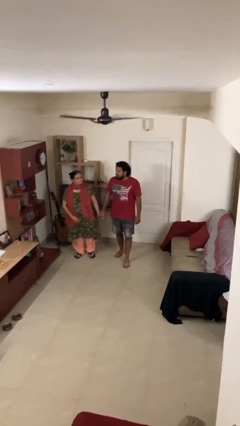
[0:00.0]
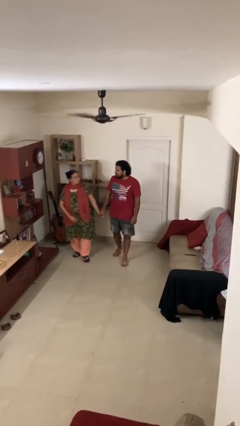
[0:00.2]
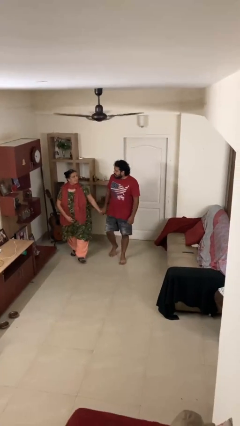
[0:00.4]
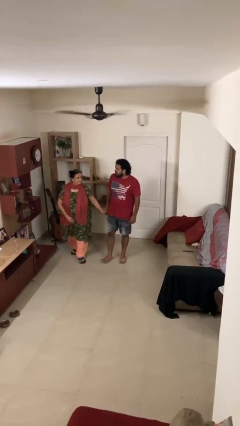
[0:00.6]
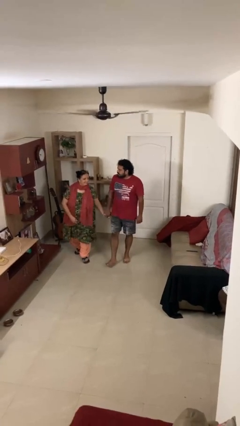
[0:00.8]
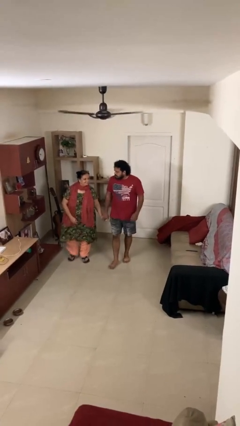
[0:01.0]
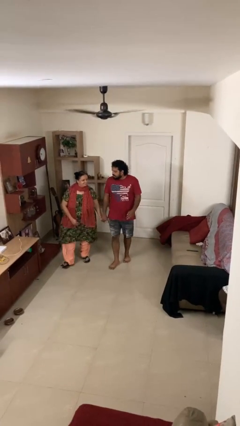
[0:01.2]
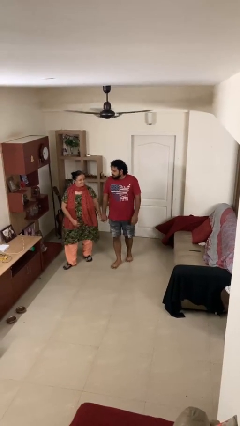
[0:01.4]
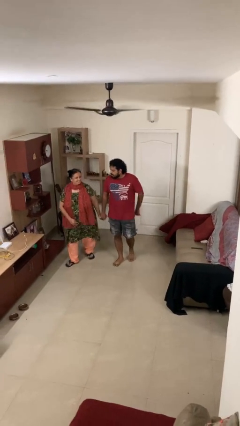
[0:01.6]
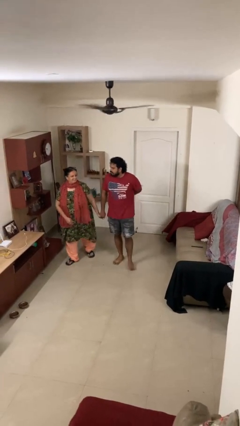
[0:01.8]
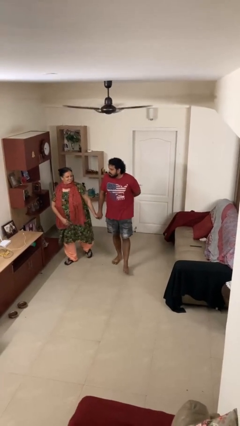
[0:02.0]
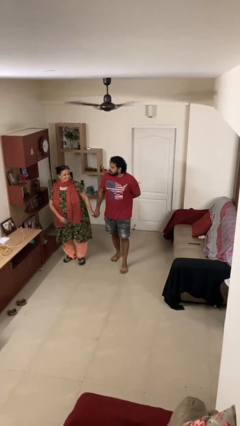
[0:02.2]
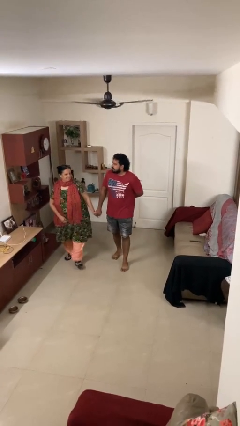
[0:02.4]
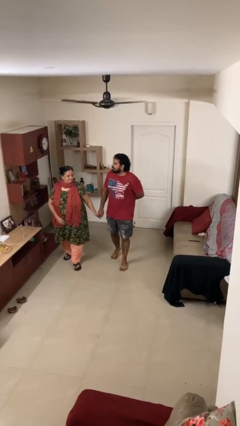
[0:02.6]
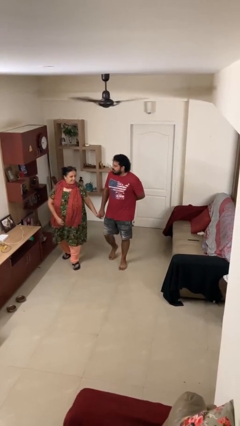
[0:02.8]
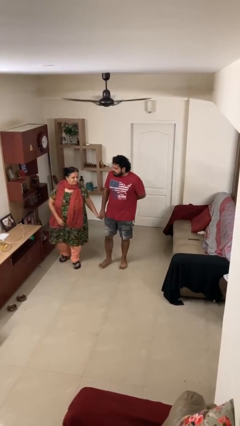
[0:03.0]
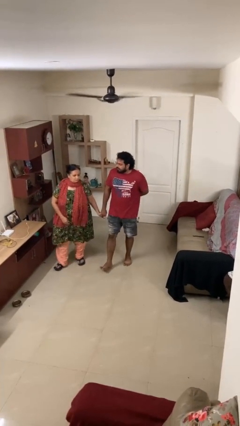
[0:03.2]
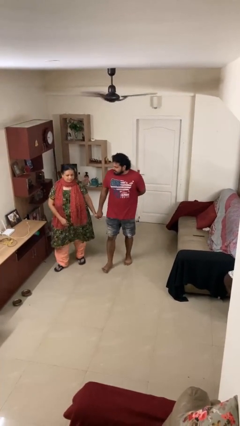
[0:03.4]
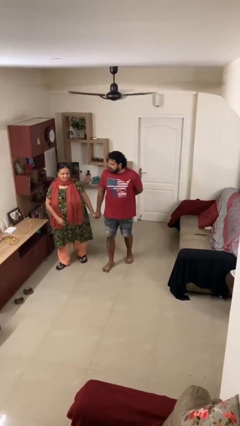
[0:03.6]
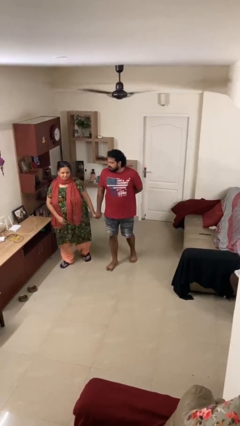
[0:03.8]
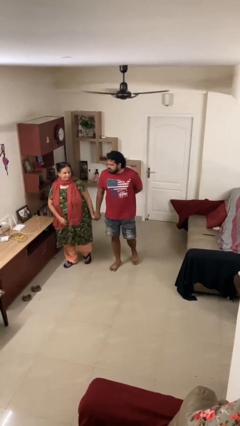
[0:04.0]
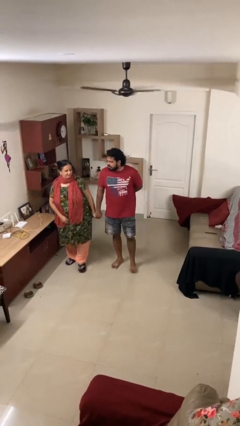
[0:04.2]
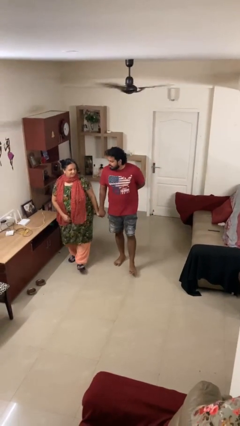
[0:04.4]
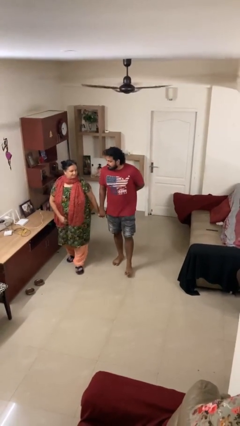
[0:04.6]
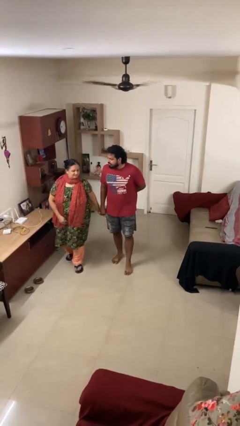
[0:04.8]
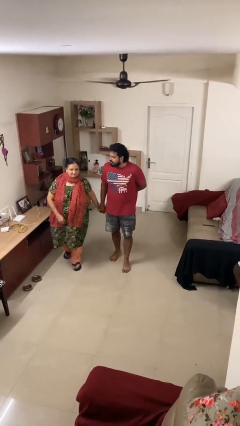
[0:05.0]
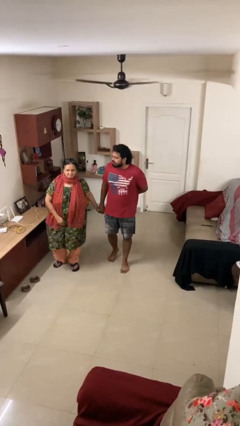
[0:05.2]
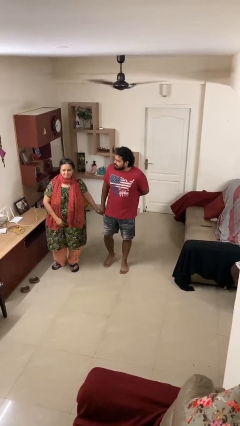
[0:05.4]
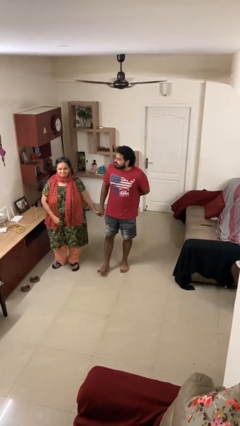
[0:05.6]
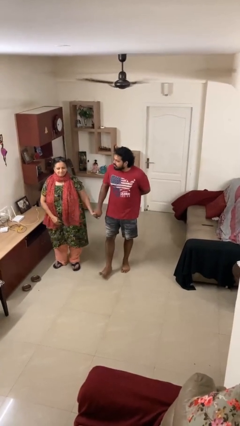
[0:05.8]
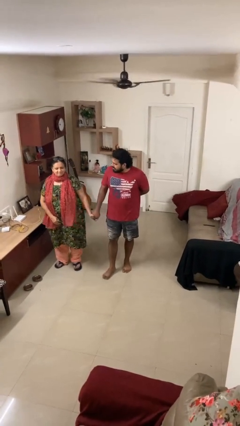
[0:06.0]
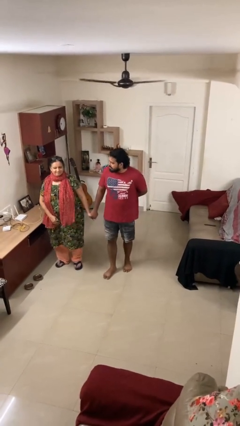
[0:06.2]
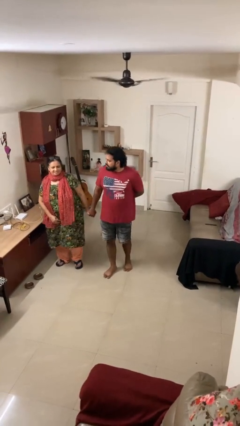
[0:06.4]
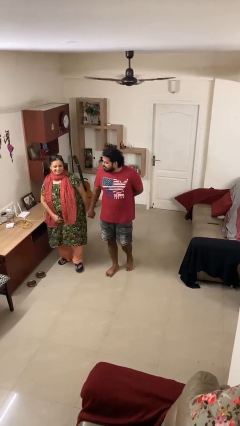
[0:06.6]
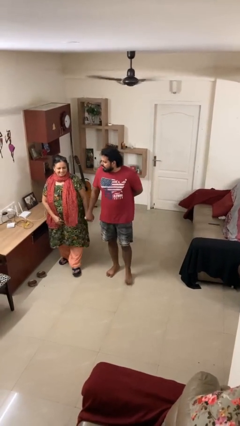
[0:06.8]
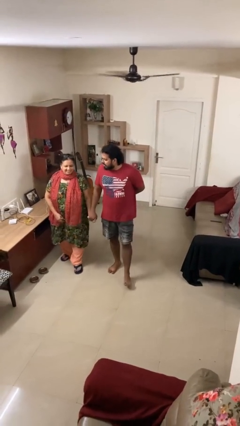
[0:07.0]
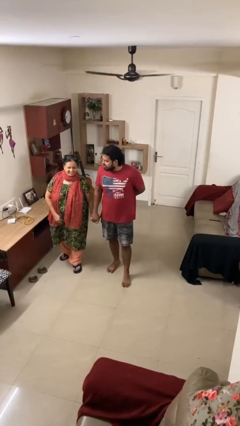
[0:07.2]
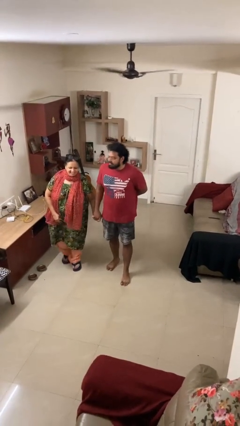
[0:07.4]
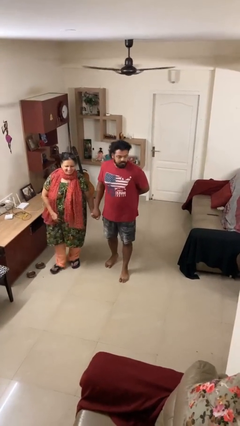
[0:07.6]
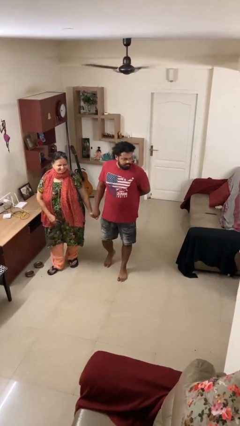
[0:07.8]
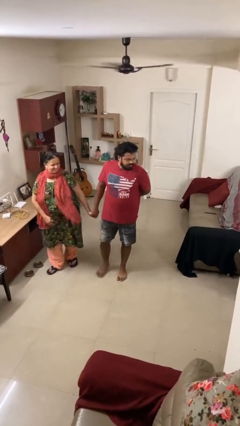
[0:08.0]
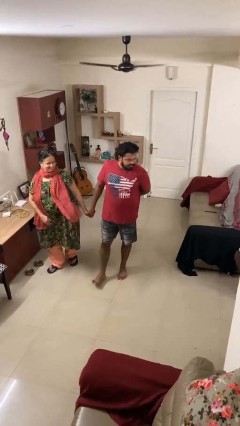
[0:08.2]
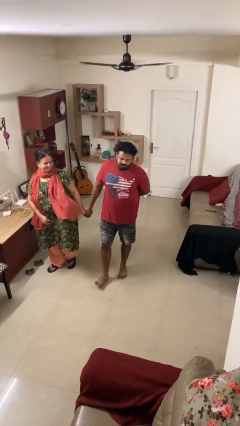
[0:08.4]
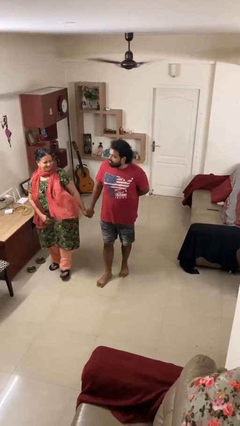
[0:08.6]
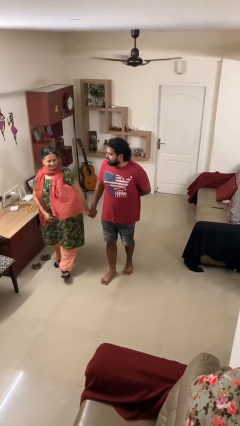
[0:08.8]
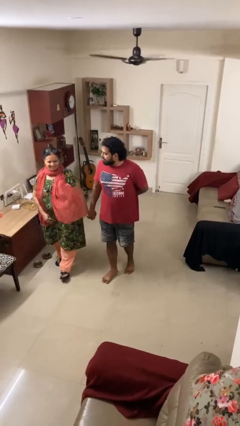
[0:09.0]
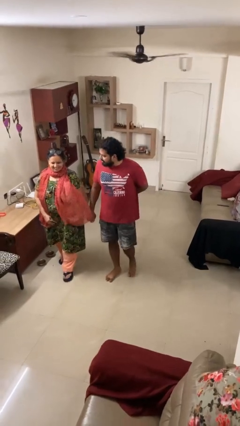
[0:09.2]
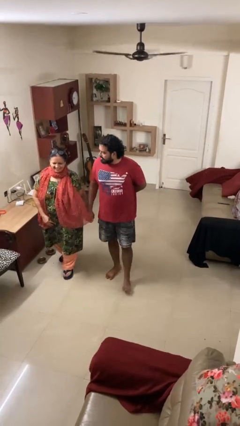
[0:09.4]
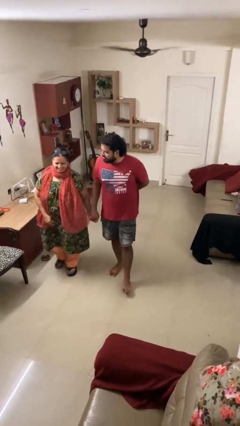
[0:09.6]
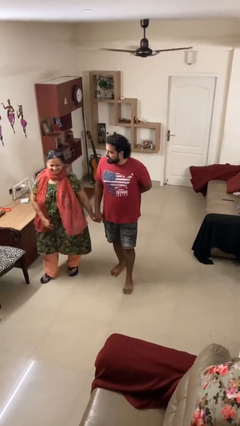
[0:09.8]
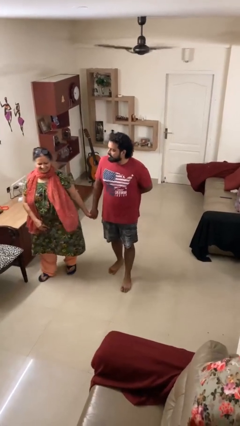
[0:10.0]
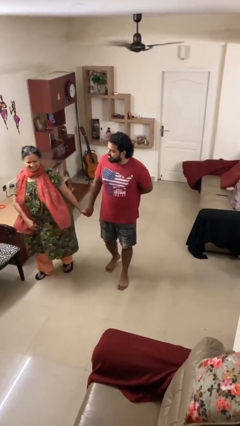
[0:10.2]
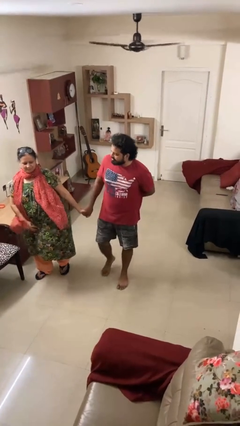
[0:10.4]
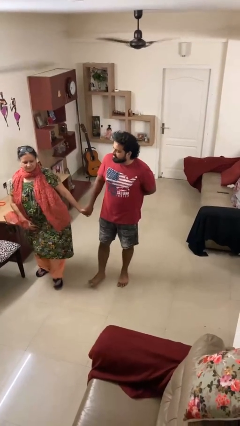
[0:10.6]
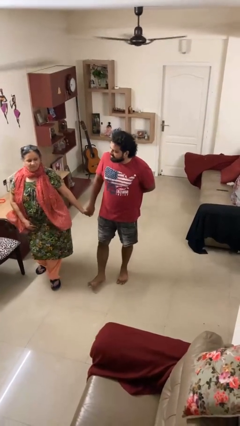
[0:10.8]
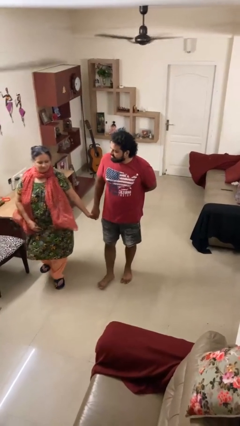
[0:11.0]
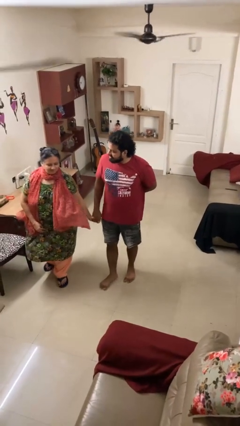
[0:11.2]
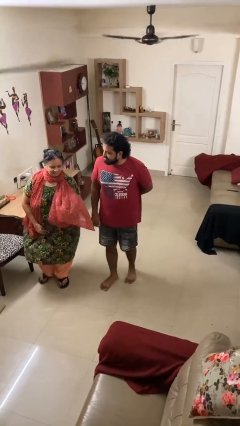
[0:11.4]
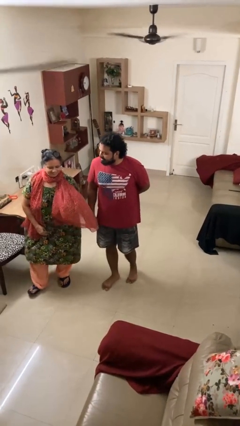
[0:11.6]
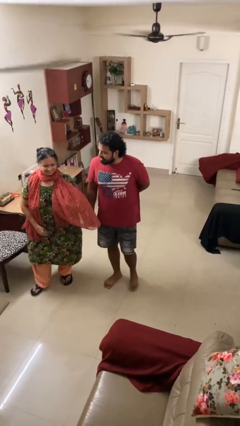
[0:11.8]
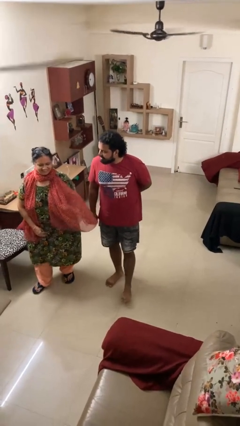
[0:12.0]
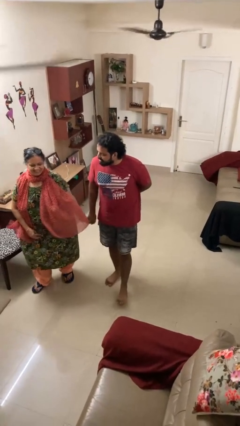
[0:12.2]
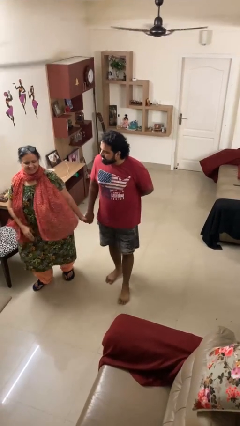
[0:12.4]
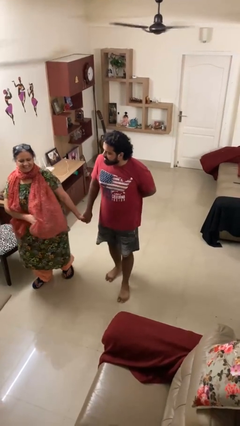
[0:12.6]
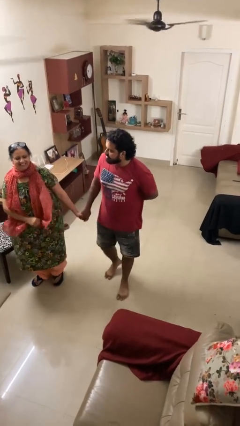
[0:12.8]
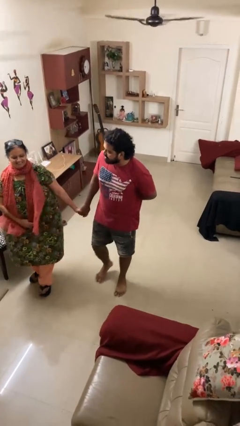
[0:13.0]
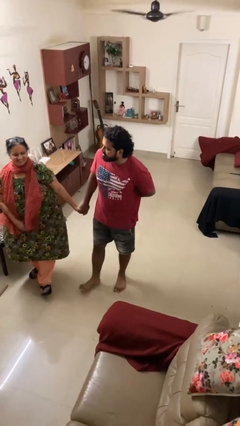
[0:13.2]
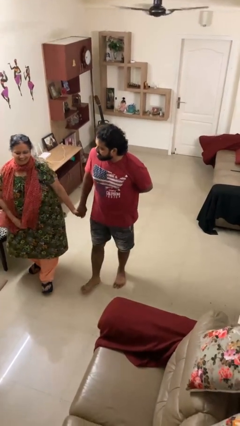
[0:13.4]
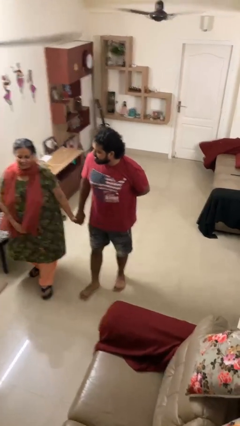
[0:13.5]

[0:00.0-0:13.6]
person holds hand

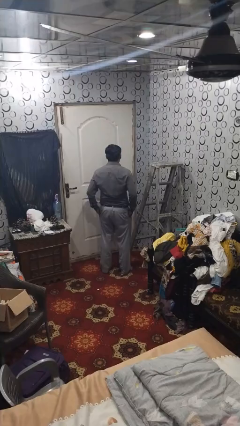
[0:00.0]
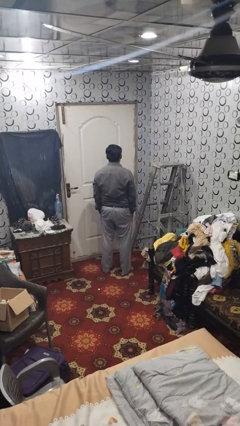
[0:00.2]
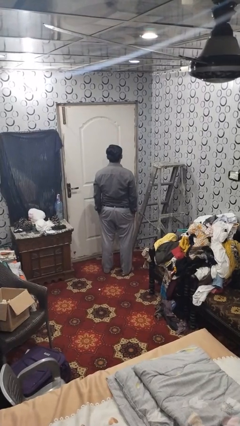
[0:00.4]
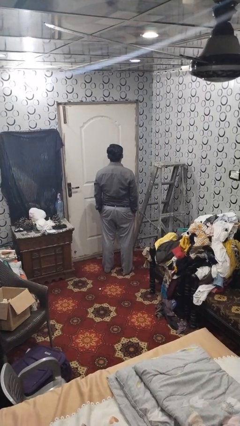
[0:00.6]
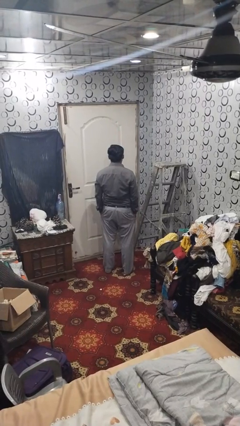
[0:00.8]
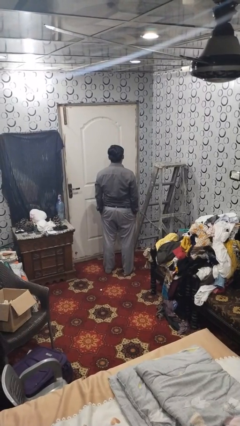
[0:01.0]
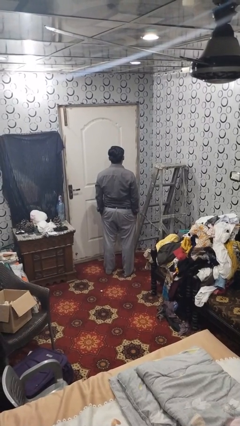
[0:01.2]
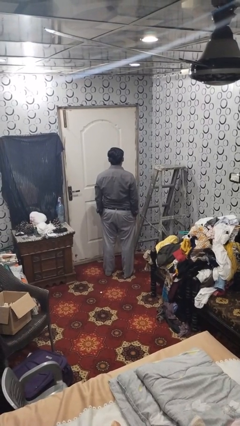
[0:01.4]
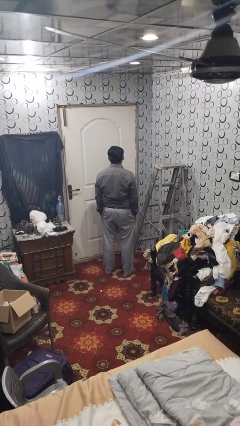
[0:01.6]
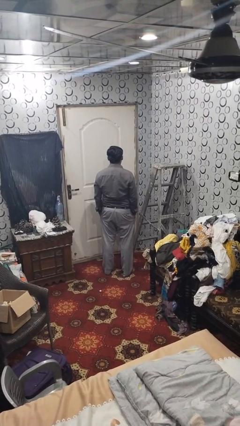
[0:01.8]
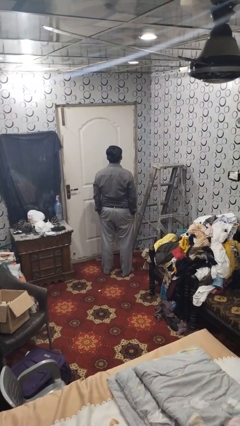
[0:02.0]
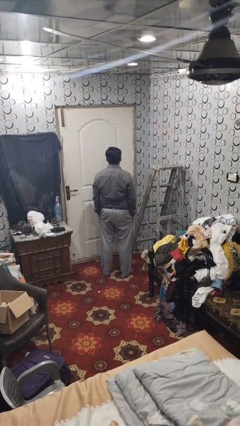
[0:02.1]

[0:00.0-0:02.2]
person puts hands in back pockets

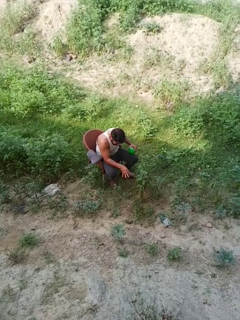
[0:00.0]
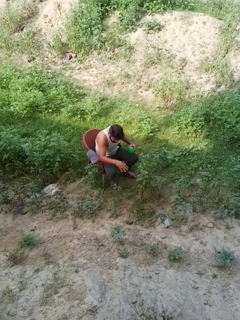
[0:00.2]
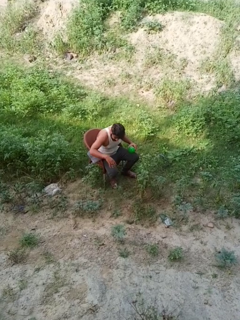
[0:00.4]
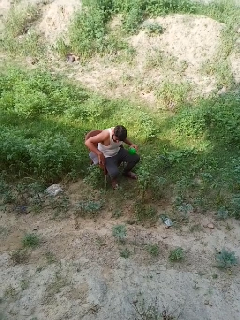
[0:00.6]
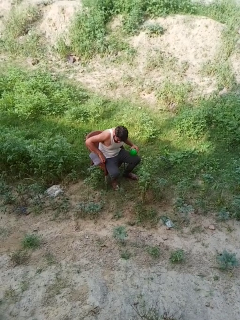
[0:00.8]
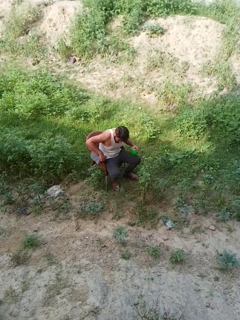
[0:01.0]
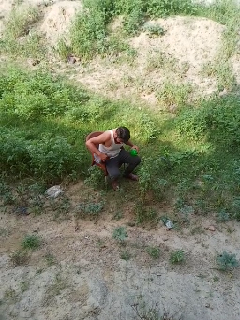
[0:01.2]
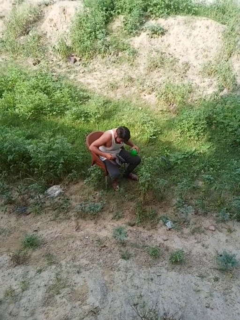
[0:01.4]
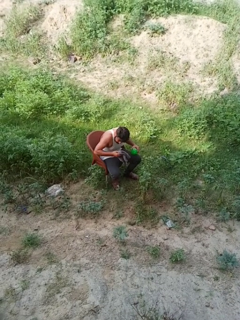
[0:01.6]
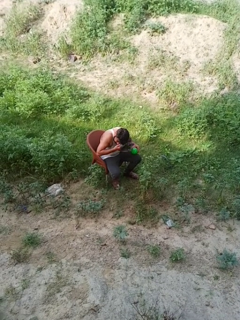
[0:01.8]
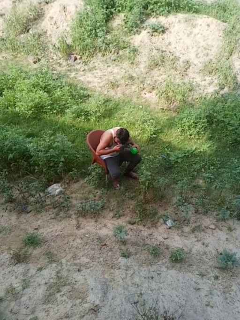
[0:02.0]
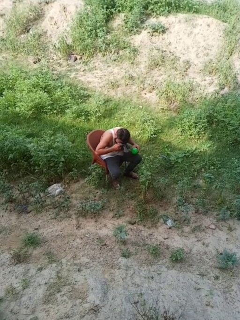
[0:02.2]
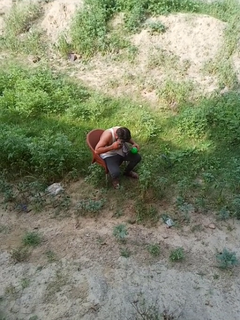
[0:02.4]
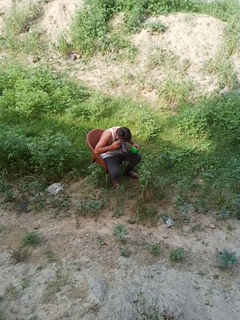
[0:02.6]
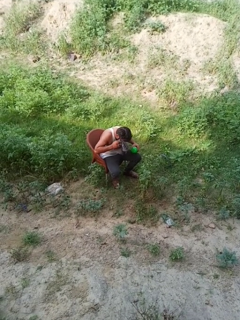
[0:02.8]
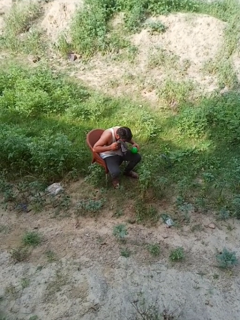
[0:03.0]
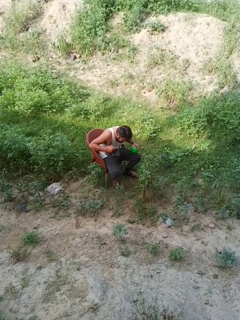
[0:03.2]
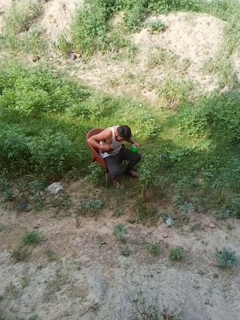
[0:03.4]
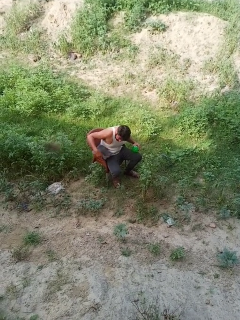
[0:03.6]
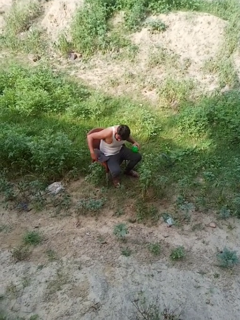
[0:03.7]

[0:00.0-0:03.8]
person dries face with towel
